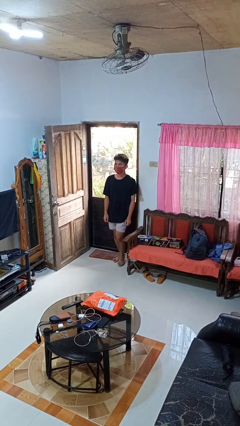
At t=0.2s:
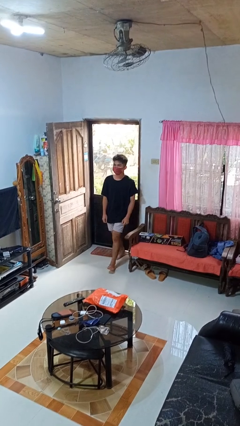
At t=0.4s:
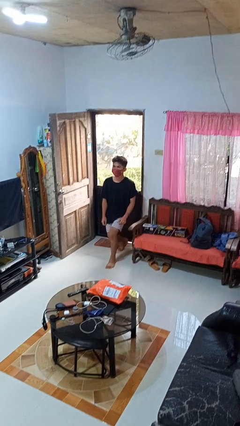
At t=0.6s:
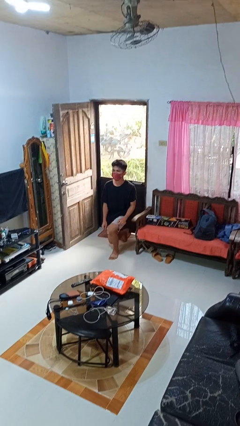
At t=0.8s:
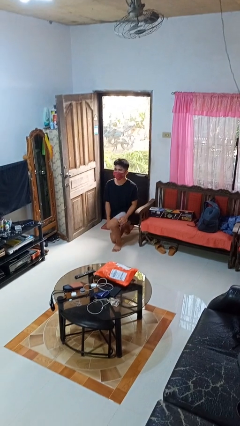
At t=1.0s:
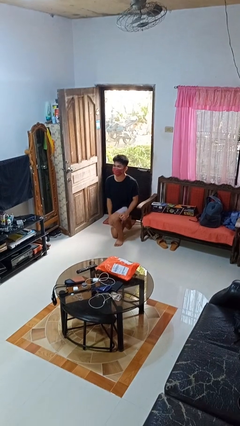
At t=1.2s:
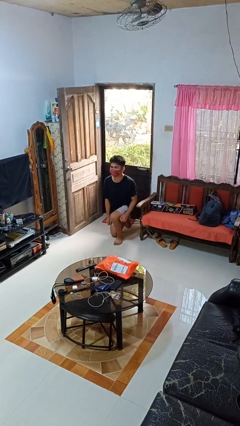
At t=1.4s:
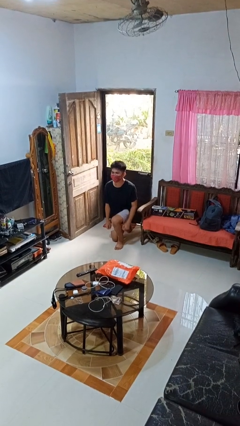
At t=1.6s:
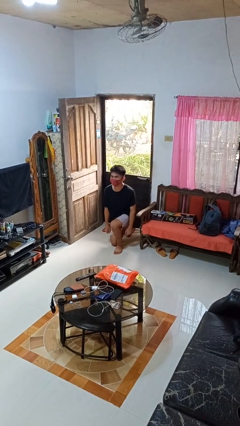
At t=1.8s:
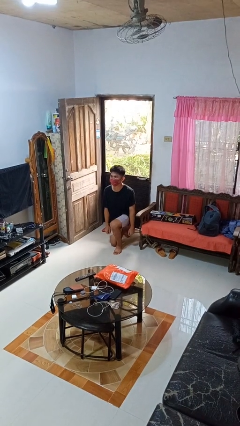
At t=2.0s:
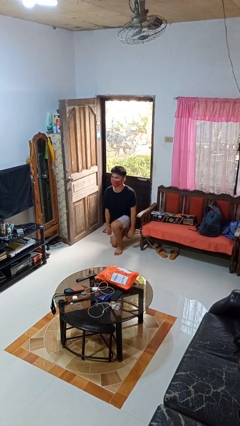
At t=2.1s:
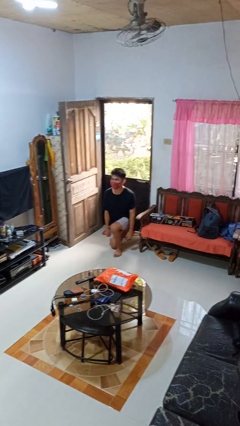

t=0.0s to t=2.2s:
person kneels

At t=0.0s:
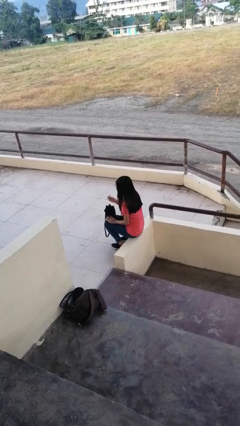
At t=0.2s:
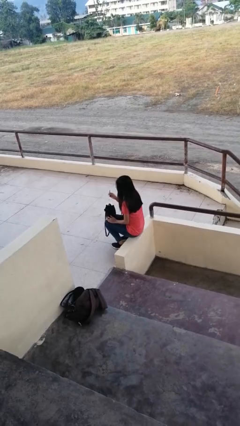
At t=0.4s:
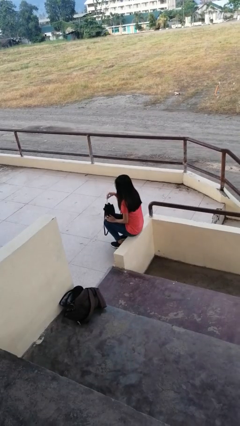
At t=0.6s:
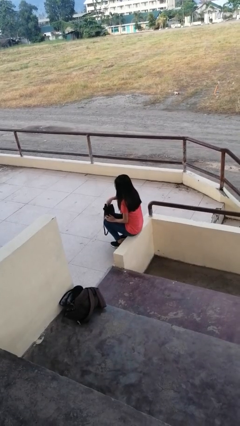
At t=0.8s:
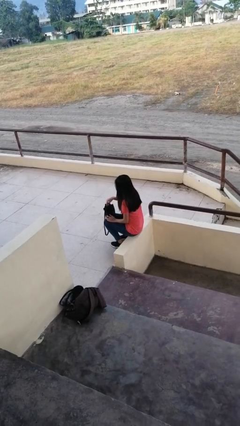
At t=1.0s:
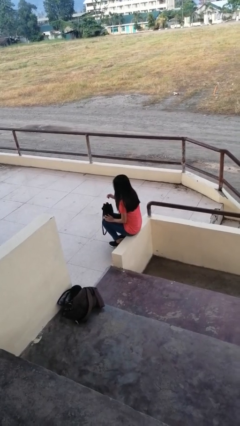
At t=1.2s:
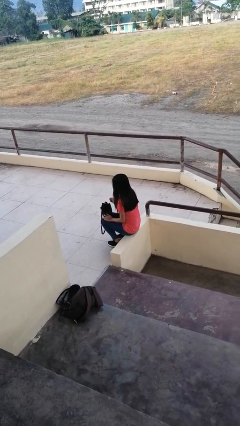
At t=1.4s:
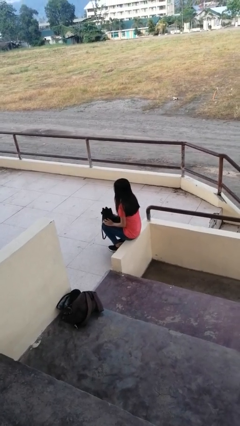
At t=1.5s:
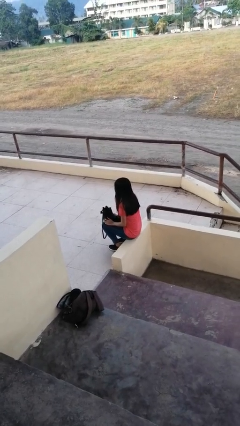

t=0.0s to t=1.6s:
person puts object into purse

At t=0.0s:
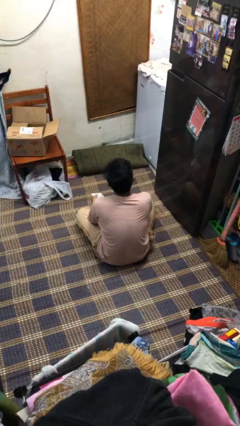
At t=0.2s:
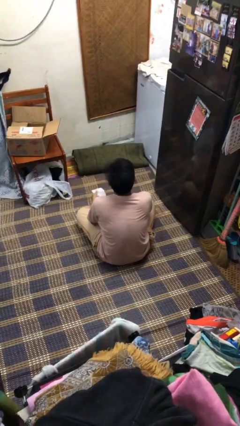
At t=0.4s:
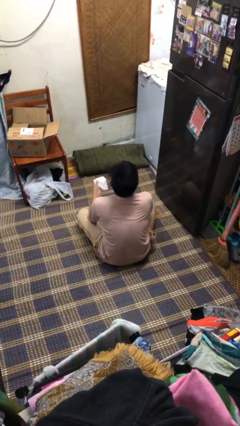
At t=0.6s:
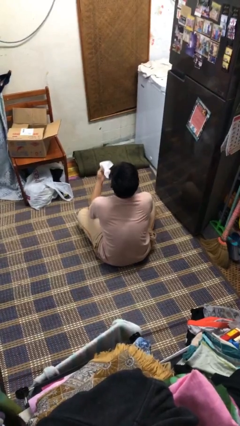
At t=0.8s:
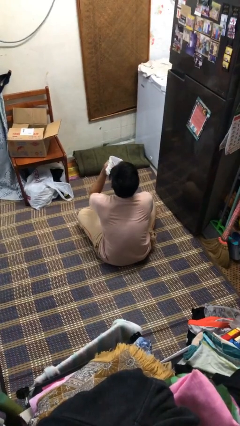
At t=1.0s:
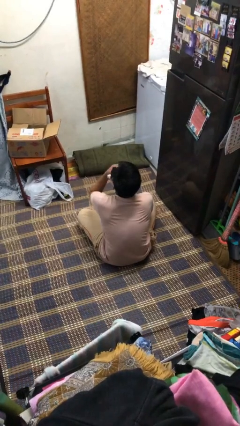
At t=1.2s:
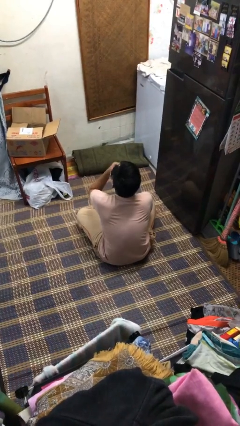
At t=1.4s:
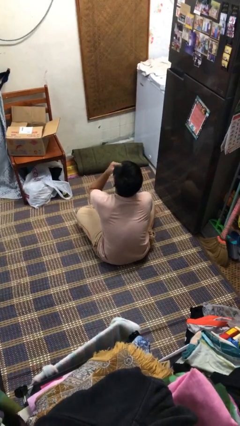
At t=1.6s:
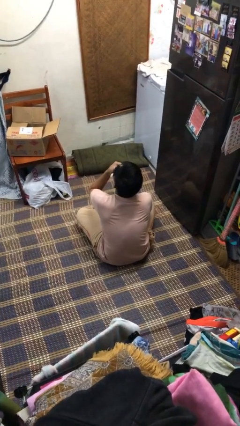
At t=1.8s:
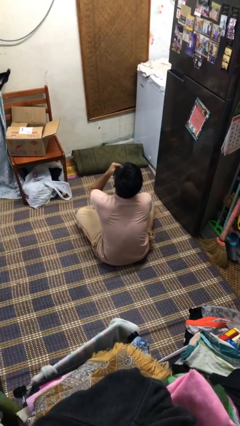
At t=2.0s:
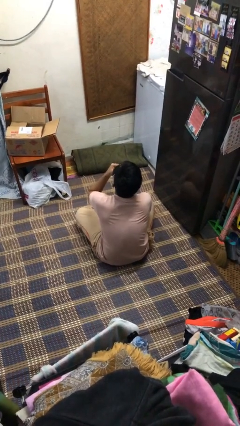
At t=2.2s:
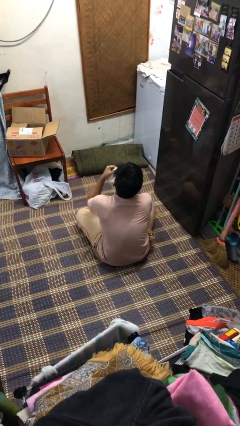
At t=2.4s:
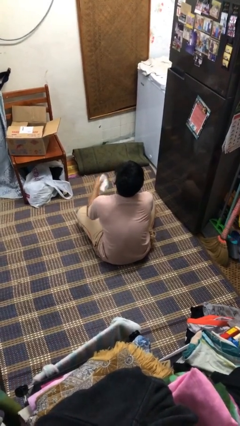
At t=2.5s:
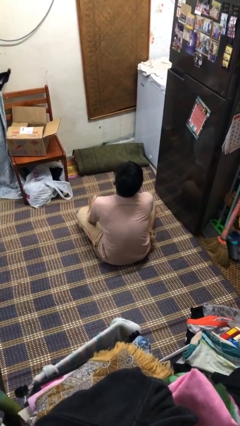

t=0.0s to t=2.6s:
person blows nose

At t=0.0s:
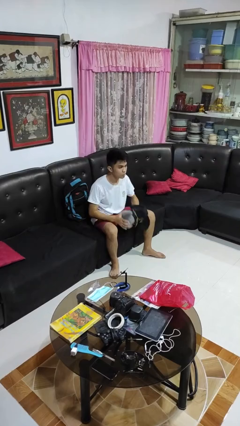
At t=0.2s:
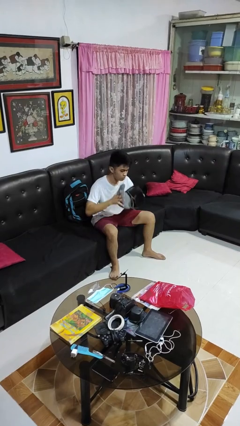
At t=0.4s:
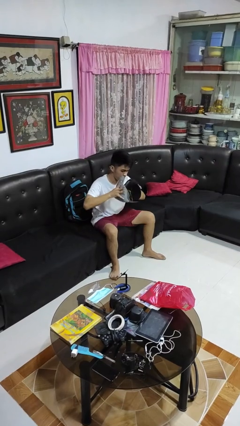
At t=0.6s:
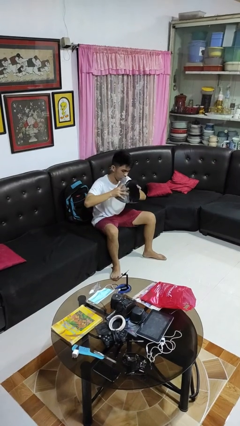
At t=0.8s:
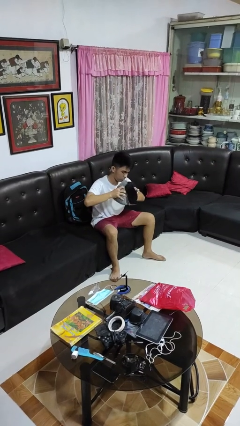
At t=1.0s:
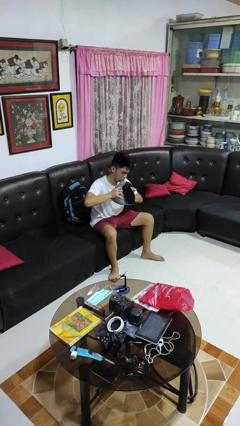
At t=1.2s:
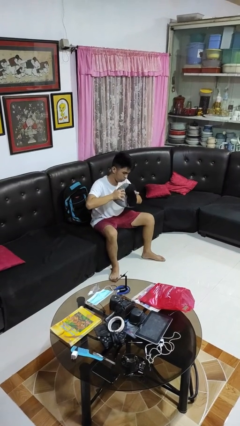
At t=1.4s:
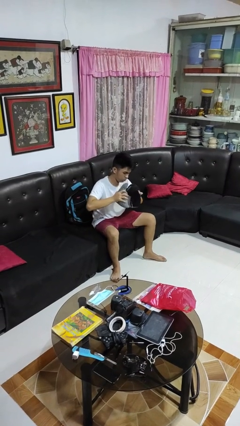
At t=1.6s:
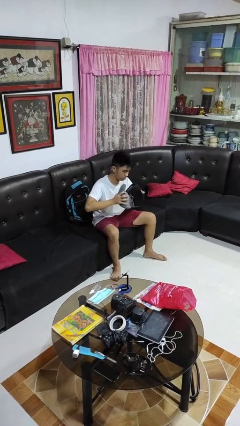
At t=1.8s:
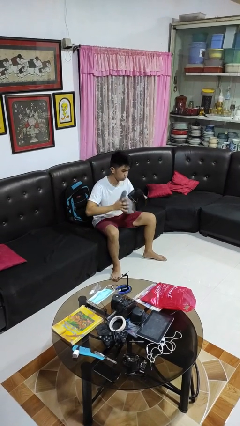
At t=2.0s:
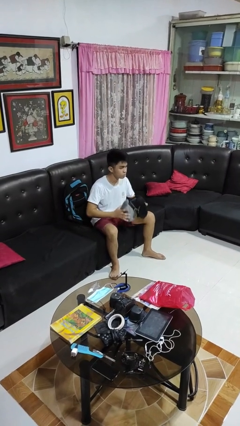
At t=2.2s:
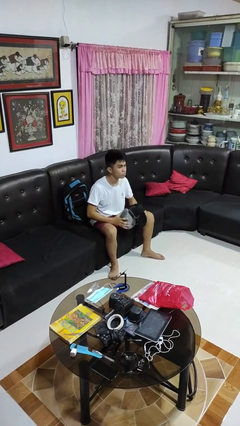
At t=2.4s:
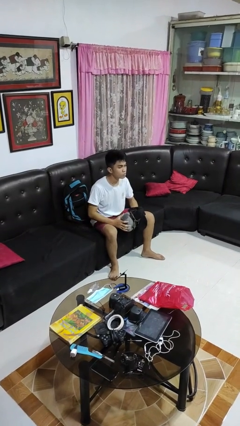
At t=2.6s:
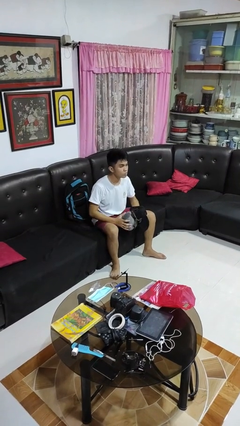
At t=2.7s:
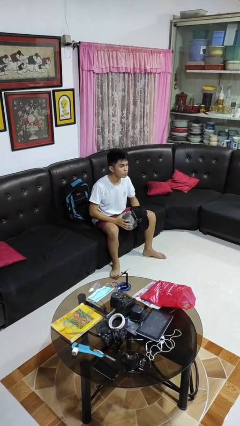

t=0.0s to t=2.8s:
person squeezes object

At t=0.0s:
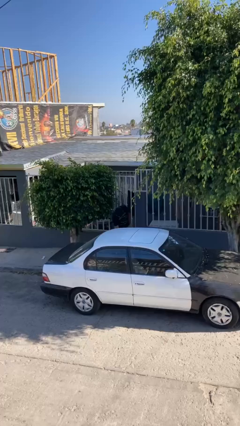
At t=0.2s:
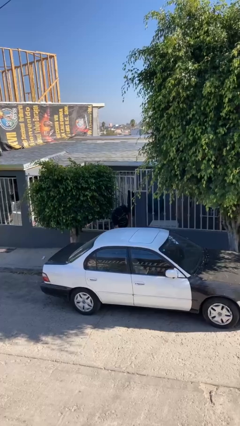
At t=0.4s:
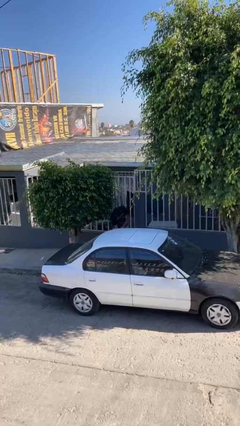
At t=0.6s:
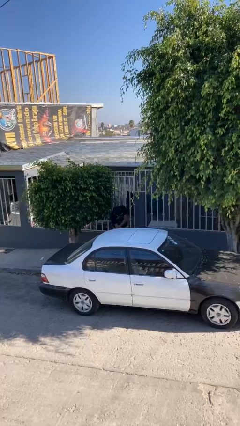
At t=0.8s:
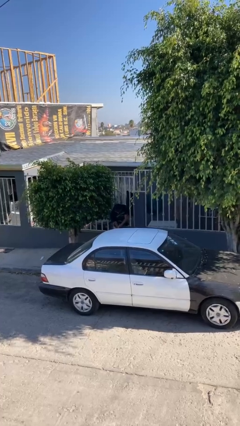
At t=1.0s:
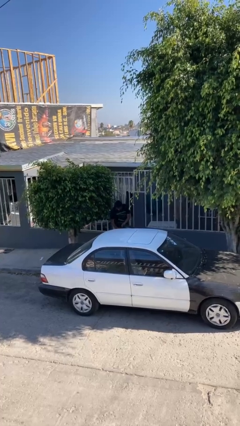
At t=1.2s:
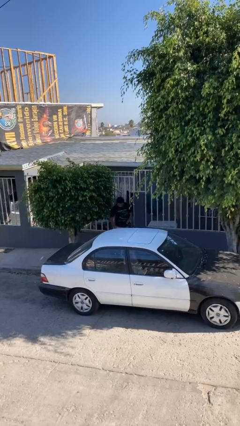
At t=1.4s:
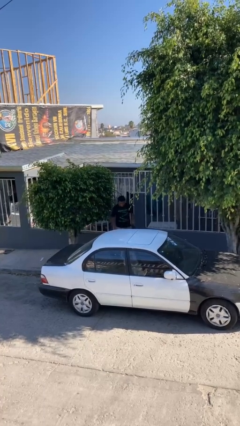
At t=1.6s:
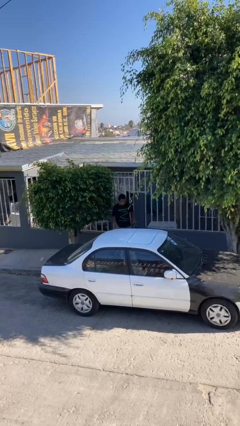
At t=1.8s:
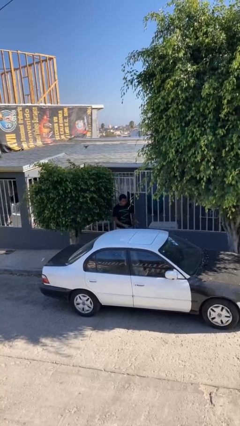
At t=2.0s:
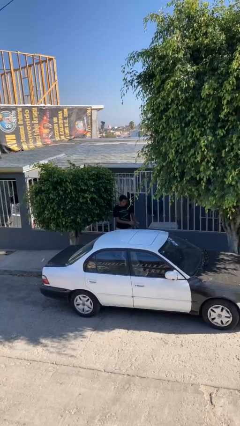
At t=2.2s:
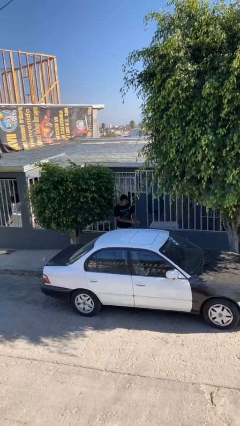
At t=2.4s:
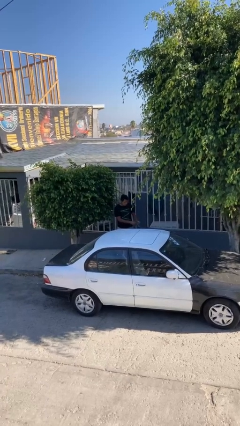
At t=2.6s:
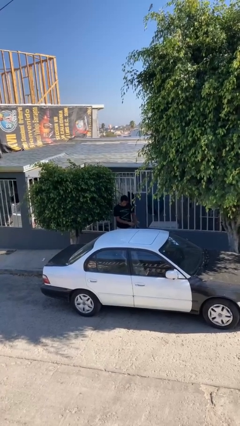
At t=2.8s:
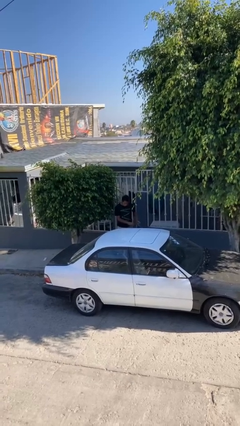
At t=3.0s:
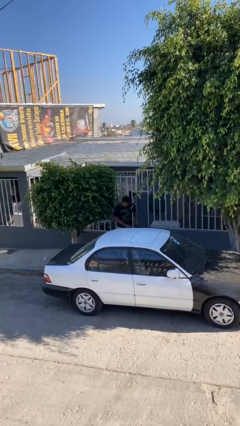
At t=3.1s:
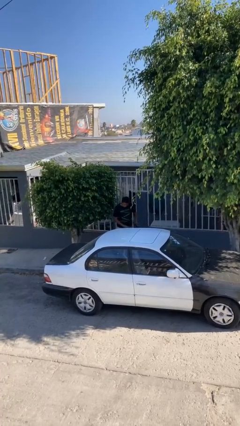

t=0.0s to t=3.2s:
person opens car door

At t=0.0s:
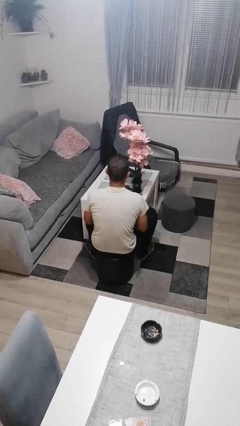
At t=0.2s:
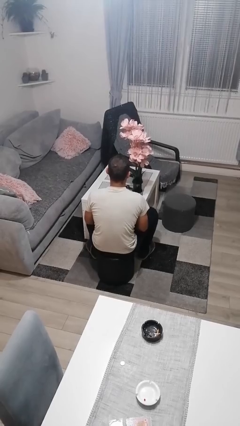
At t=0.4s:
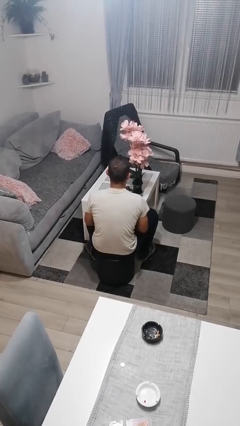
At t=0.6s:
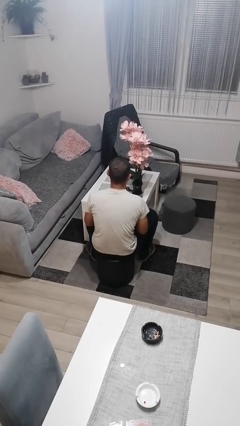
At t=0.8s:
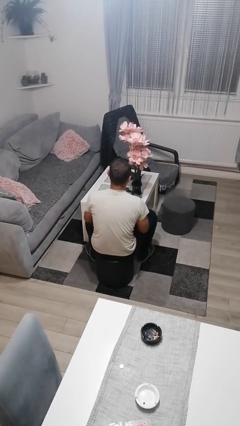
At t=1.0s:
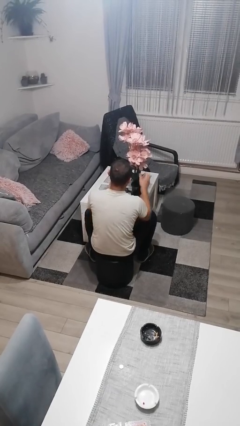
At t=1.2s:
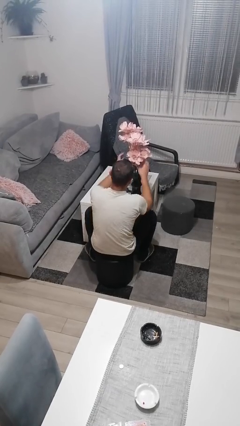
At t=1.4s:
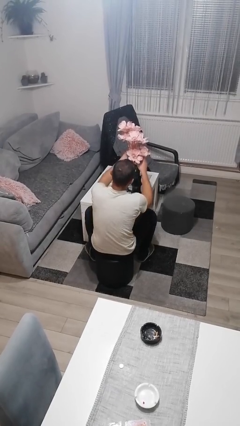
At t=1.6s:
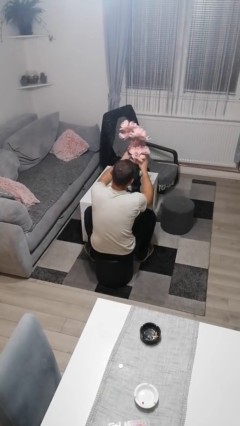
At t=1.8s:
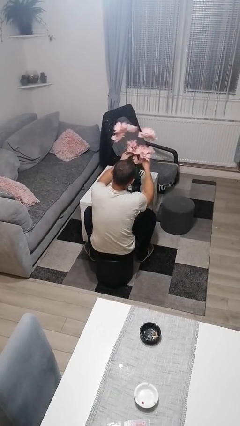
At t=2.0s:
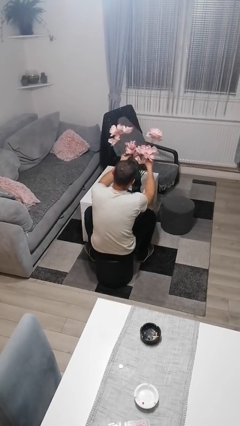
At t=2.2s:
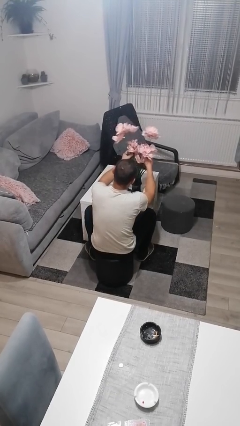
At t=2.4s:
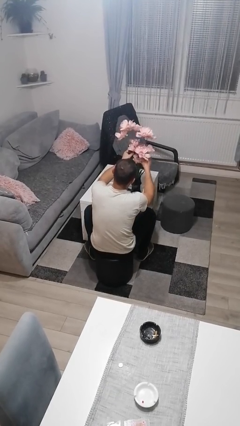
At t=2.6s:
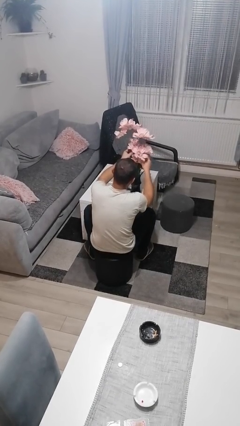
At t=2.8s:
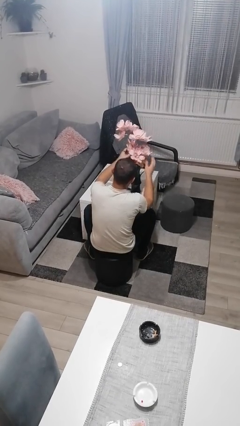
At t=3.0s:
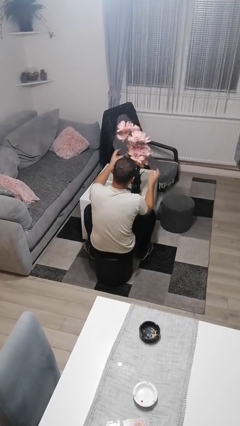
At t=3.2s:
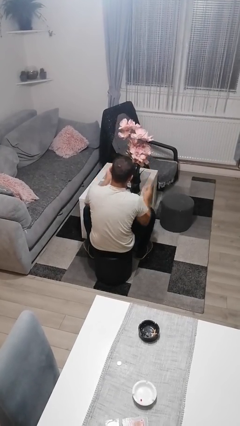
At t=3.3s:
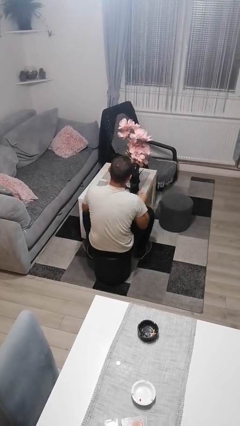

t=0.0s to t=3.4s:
person arranges flowers in vase

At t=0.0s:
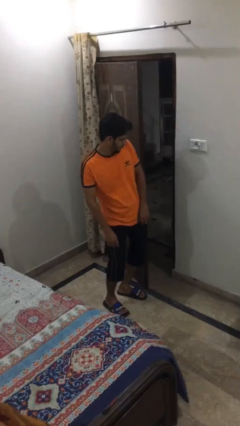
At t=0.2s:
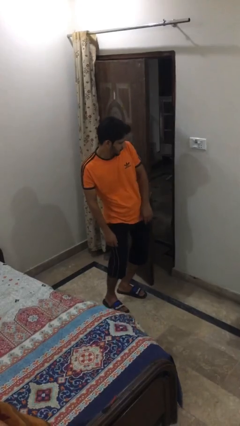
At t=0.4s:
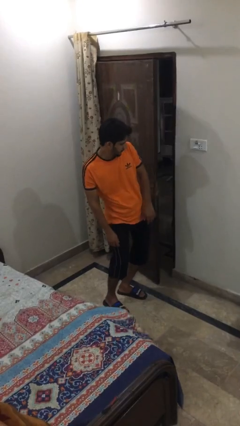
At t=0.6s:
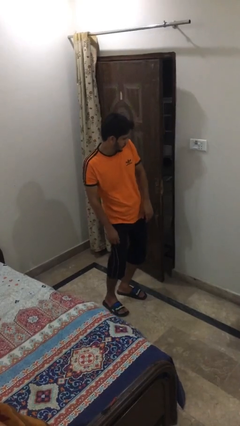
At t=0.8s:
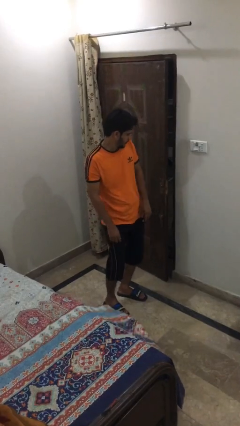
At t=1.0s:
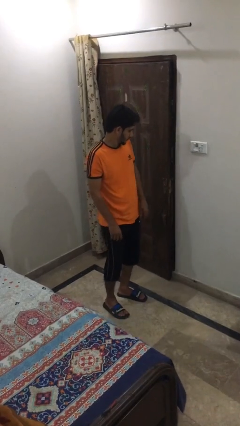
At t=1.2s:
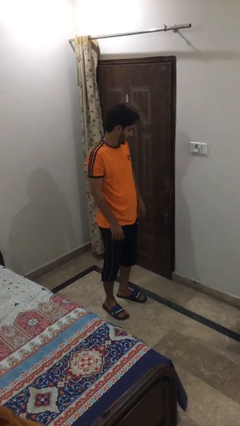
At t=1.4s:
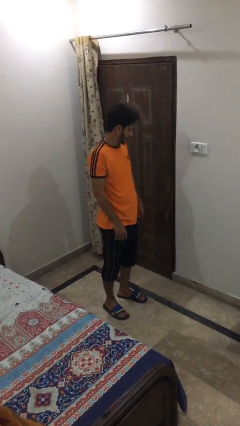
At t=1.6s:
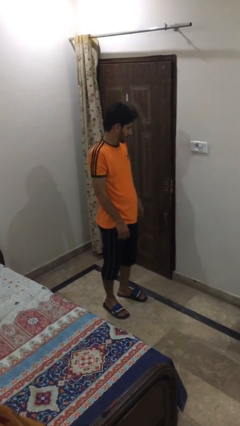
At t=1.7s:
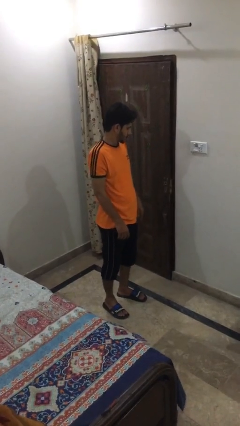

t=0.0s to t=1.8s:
person closes door with hip
